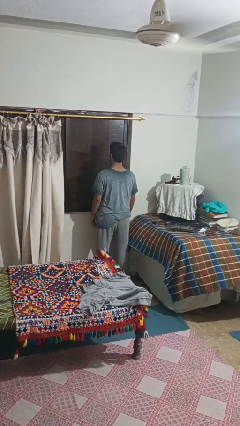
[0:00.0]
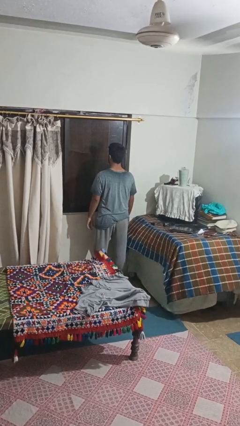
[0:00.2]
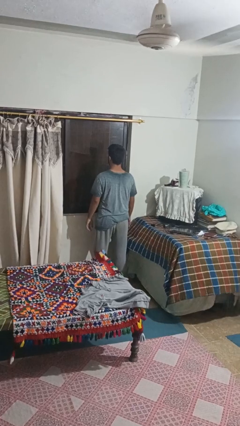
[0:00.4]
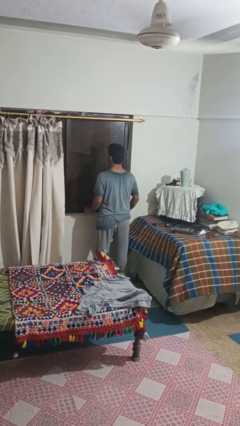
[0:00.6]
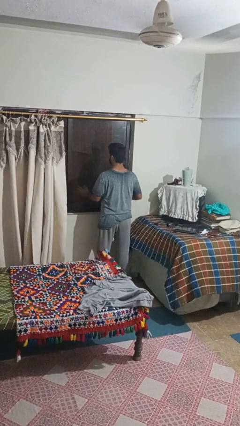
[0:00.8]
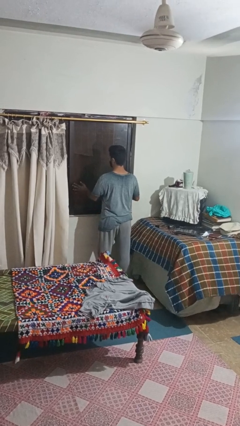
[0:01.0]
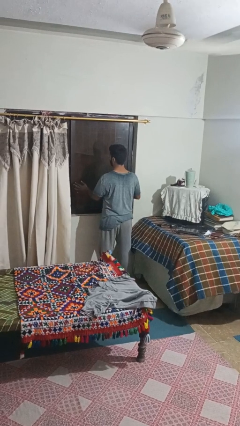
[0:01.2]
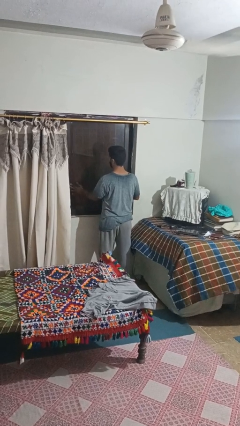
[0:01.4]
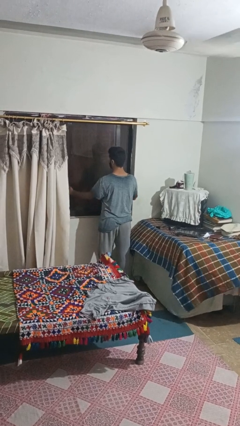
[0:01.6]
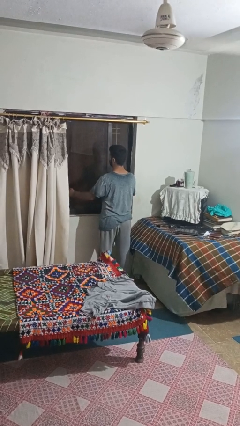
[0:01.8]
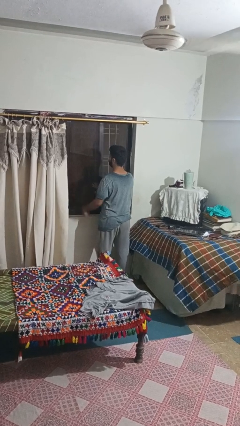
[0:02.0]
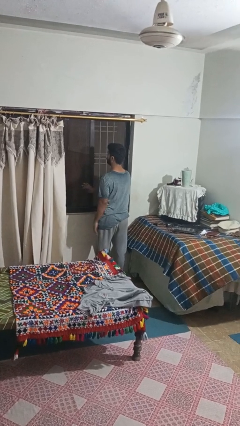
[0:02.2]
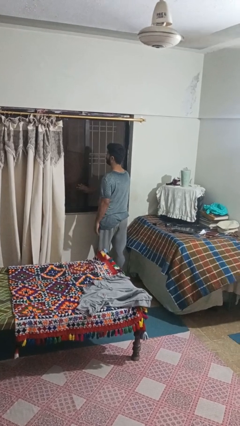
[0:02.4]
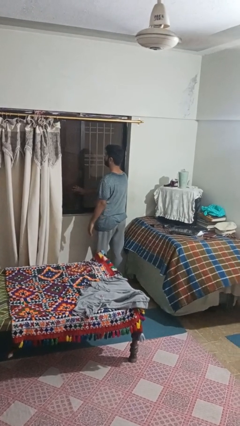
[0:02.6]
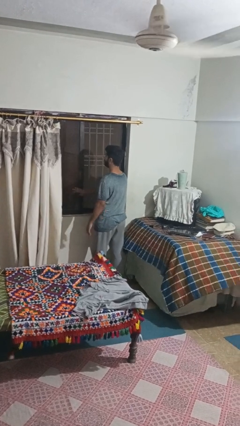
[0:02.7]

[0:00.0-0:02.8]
person opens home window

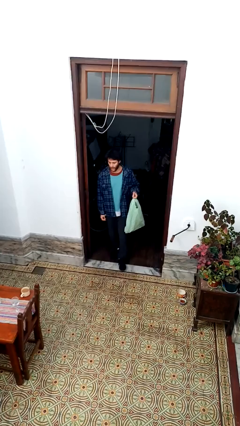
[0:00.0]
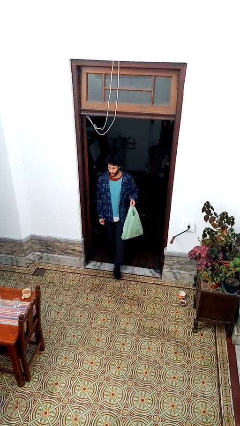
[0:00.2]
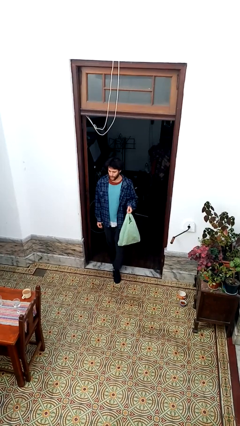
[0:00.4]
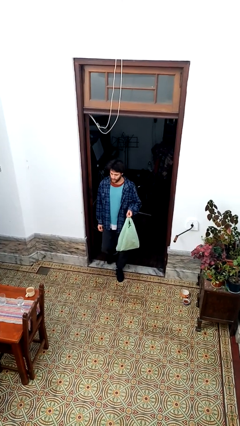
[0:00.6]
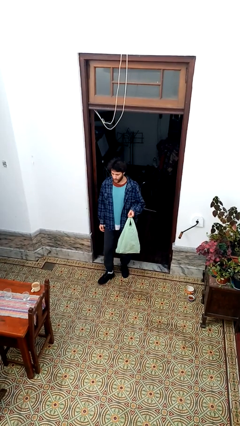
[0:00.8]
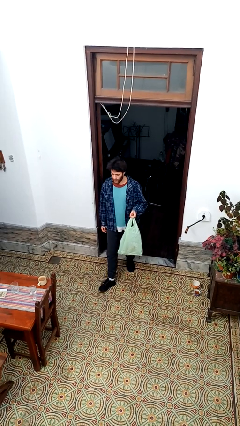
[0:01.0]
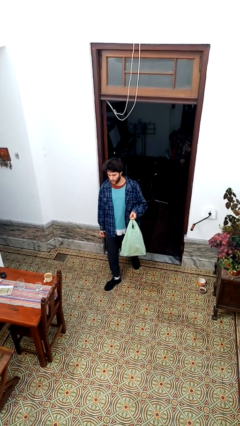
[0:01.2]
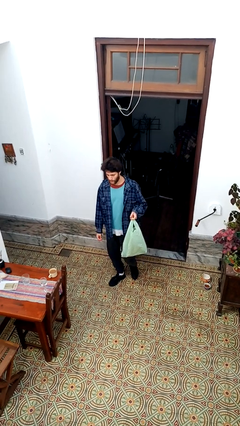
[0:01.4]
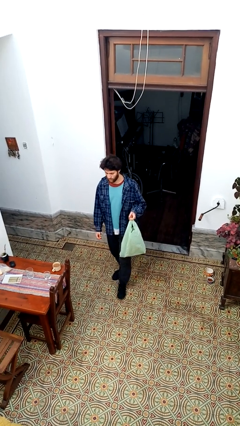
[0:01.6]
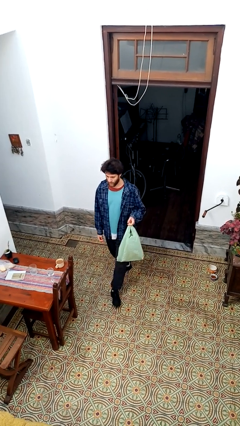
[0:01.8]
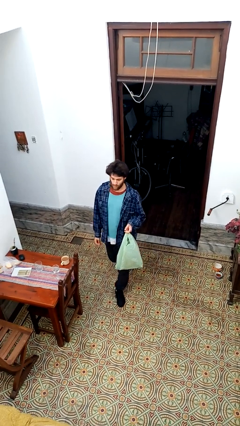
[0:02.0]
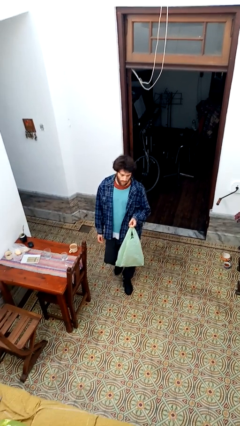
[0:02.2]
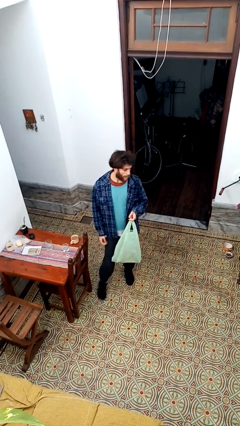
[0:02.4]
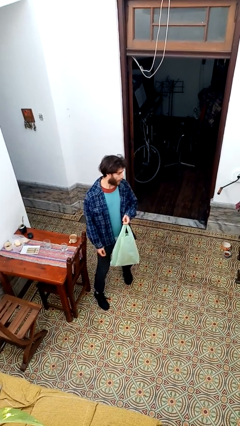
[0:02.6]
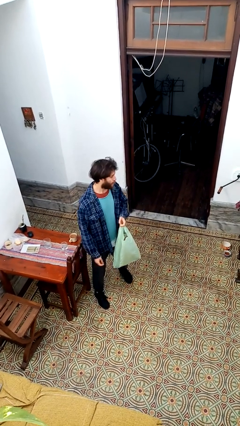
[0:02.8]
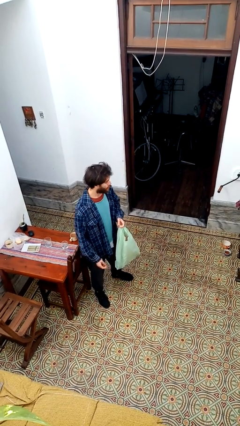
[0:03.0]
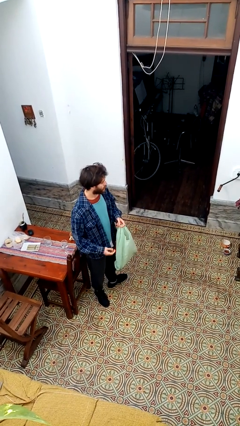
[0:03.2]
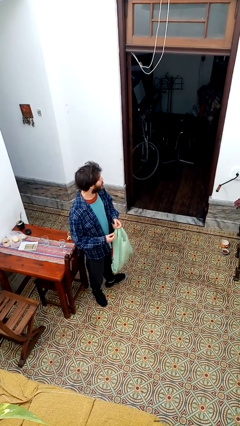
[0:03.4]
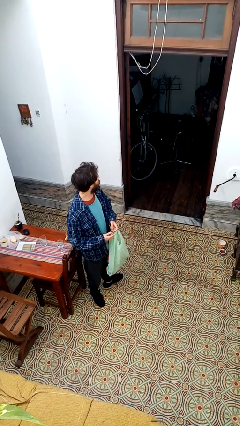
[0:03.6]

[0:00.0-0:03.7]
person carries groceries

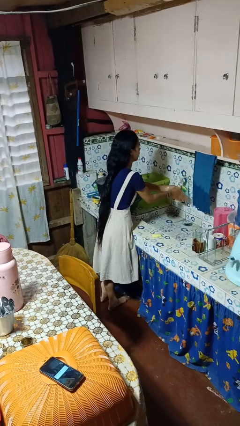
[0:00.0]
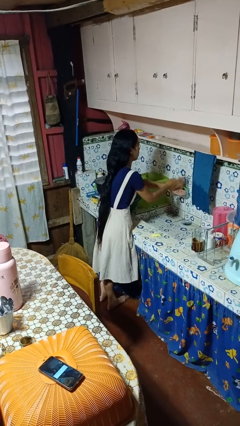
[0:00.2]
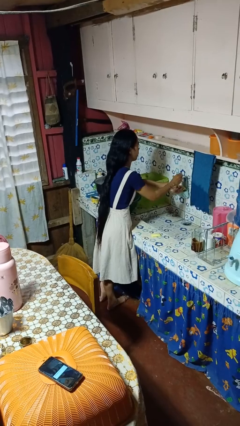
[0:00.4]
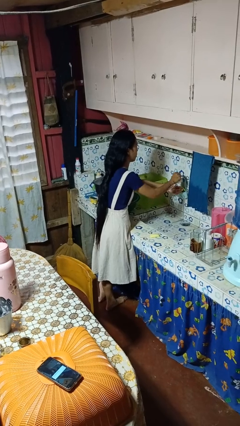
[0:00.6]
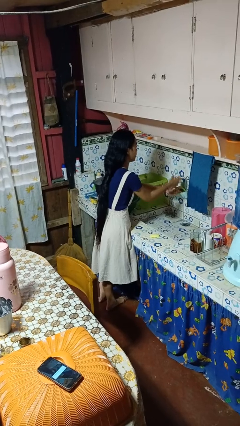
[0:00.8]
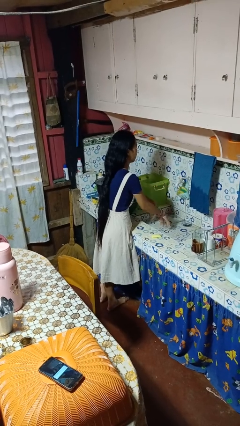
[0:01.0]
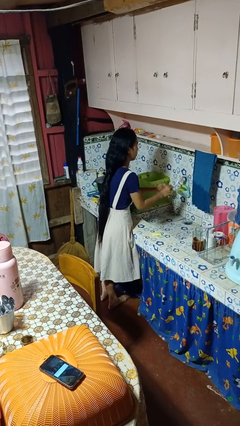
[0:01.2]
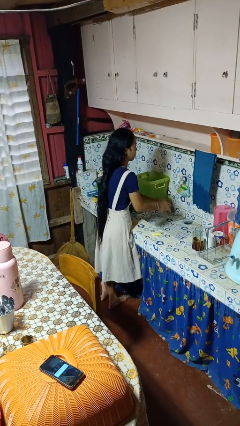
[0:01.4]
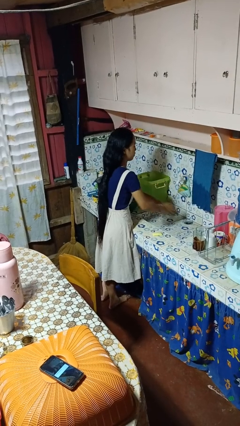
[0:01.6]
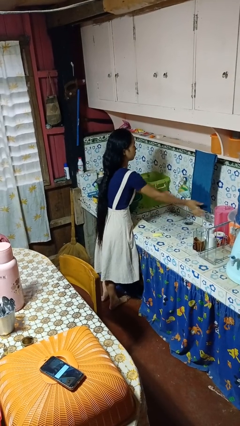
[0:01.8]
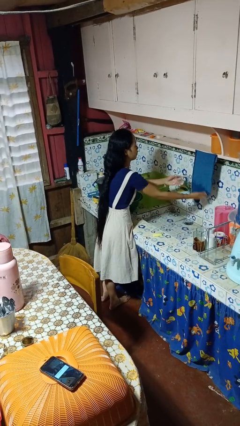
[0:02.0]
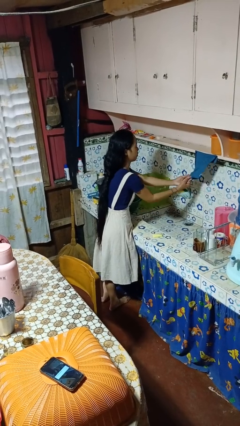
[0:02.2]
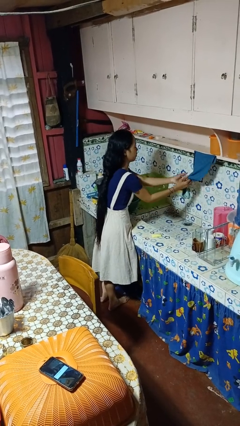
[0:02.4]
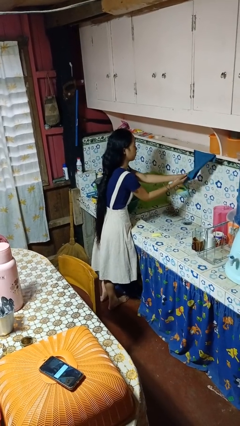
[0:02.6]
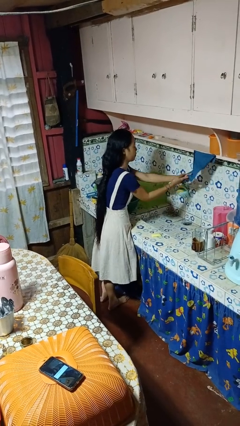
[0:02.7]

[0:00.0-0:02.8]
person washes hands

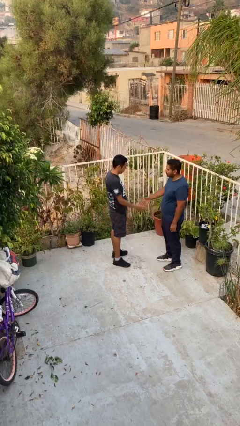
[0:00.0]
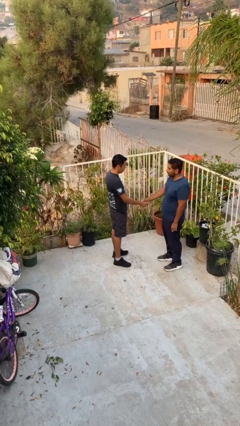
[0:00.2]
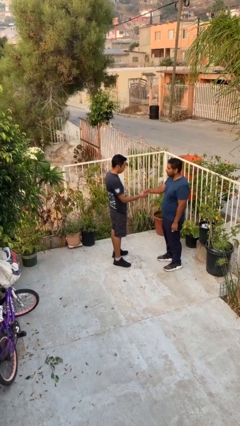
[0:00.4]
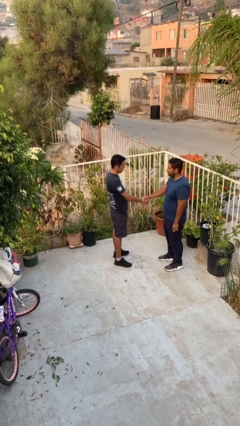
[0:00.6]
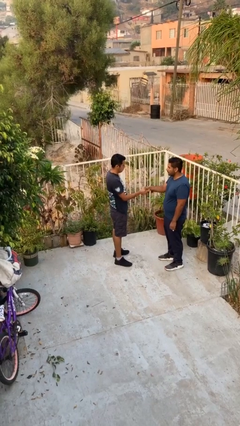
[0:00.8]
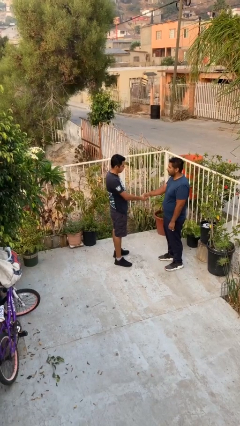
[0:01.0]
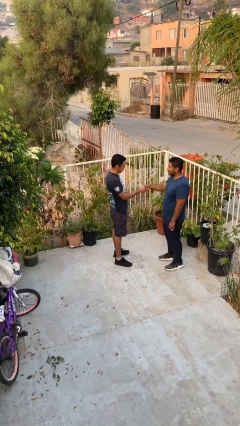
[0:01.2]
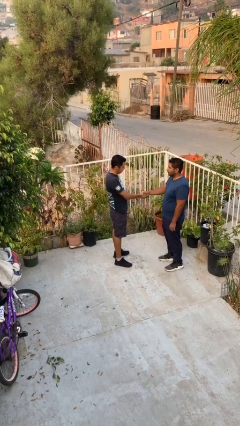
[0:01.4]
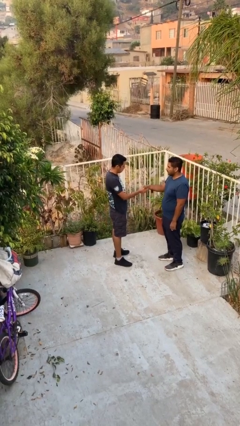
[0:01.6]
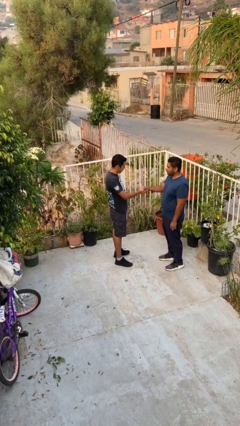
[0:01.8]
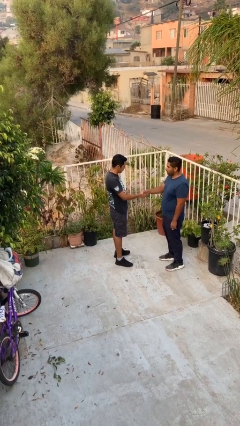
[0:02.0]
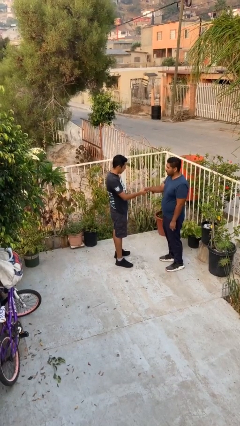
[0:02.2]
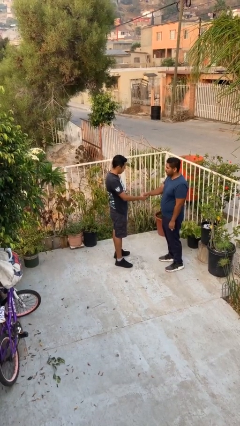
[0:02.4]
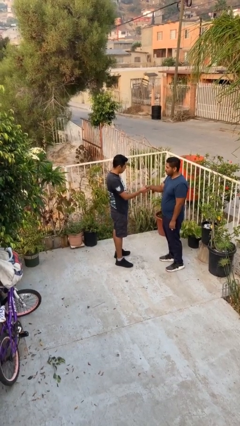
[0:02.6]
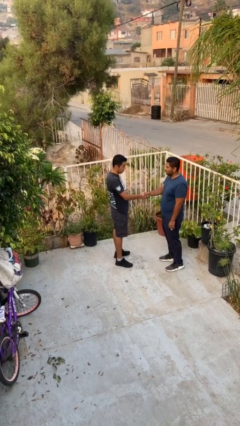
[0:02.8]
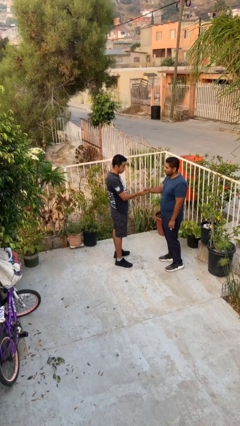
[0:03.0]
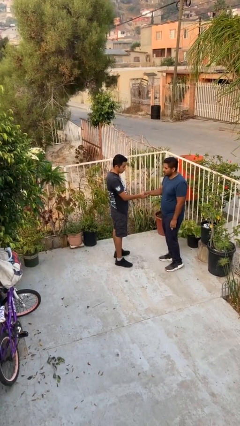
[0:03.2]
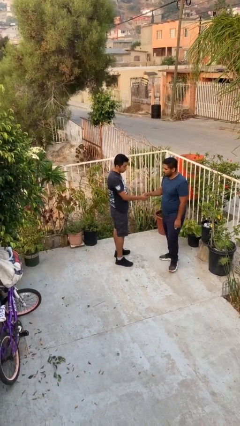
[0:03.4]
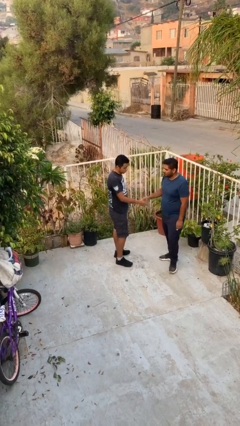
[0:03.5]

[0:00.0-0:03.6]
person shakes hand

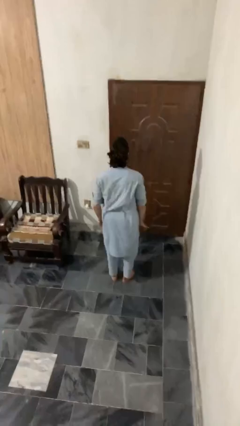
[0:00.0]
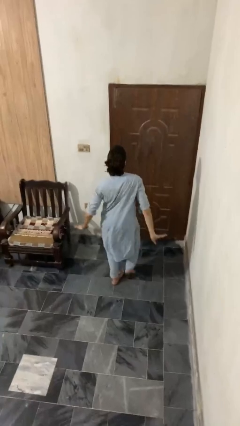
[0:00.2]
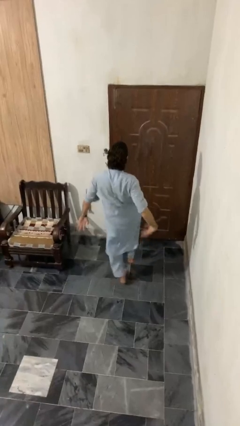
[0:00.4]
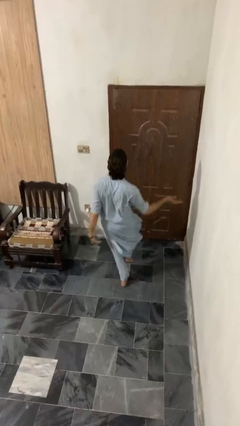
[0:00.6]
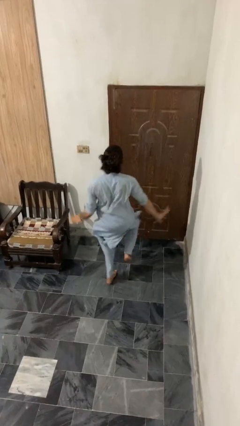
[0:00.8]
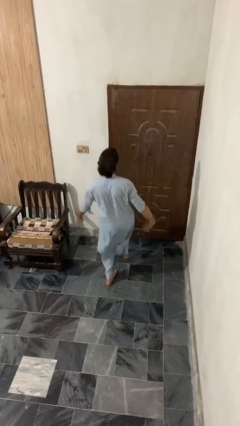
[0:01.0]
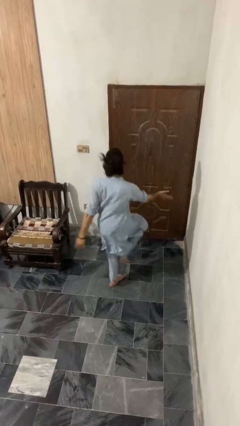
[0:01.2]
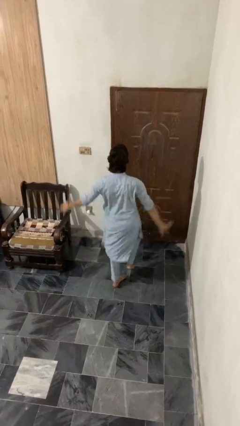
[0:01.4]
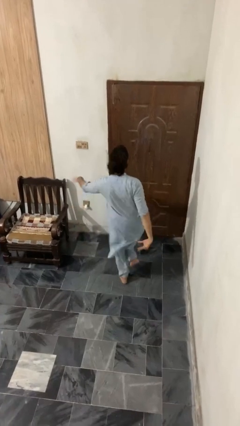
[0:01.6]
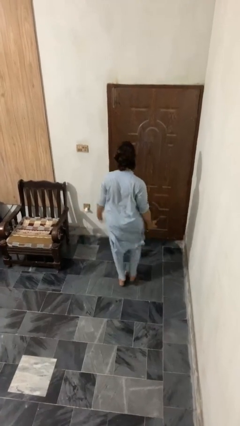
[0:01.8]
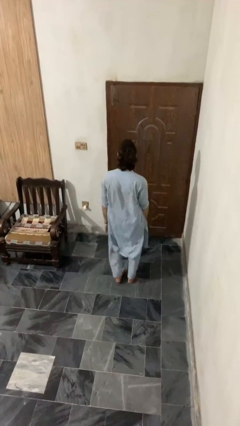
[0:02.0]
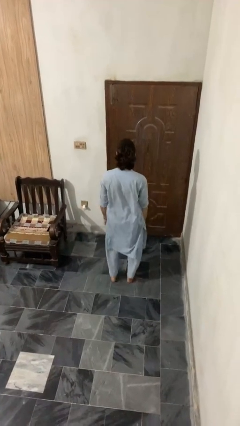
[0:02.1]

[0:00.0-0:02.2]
person dances in place

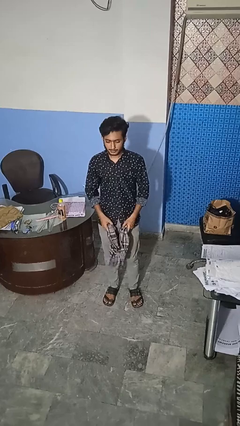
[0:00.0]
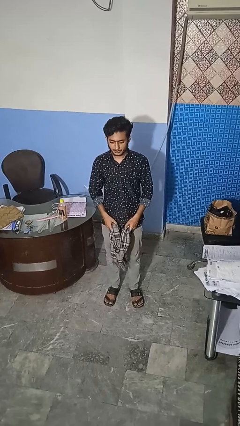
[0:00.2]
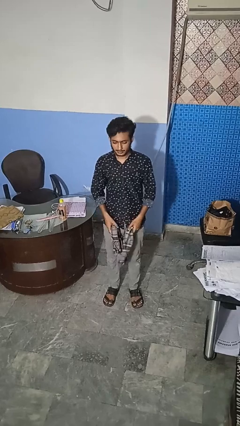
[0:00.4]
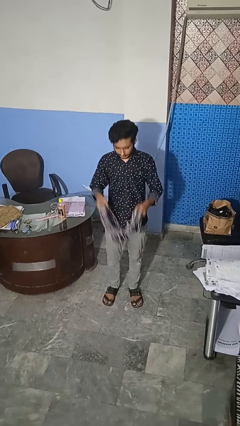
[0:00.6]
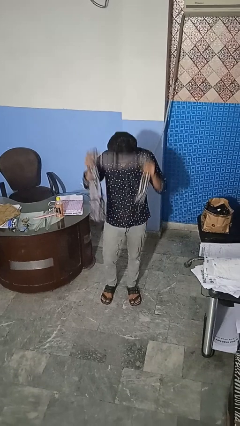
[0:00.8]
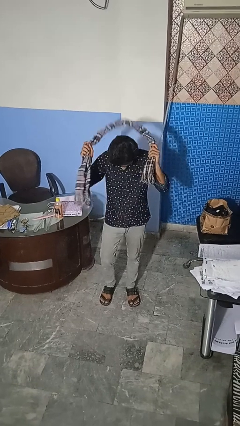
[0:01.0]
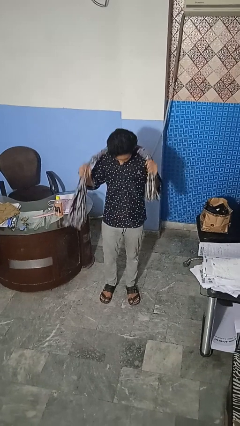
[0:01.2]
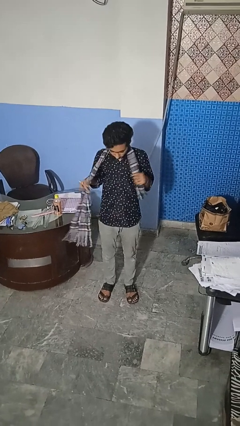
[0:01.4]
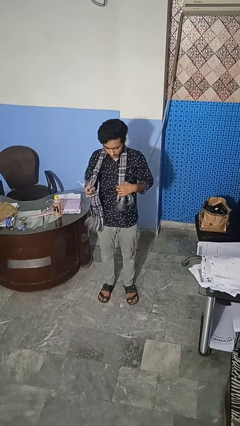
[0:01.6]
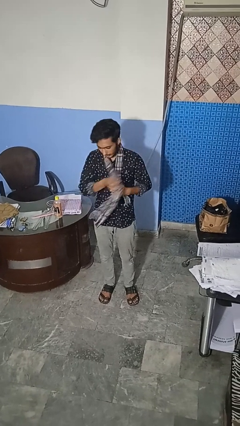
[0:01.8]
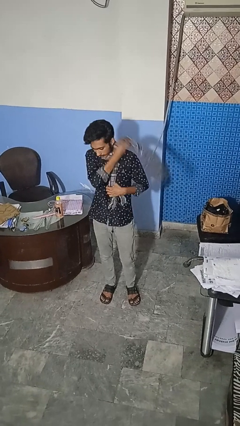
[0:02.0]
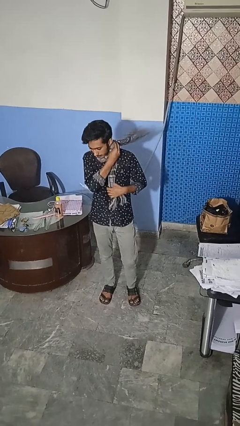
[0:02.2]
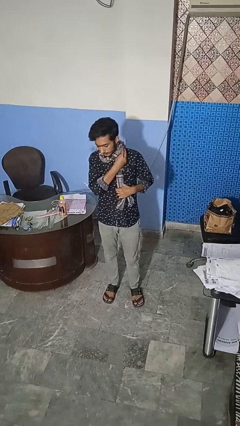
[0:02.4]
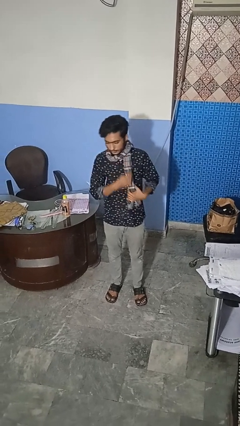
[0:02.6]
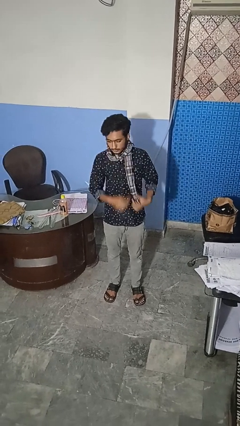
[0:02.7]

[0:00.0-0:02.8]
person puts on scarf
